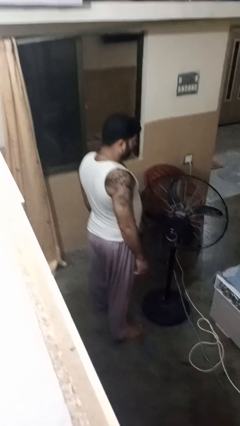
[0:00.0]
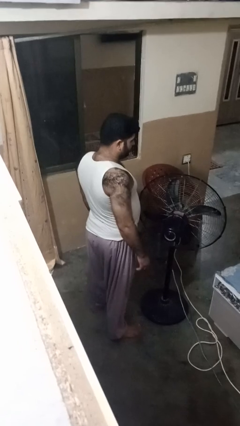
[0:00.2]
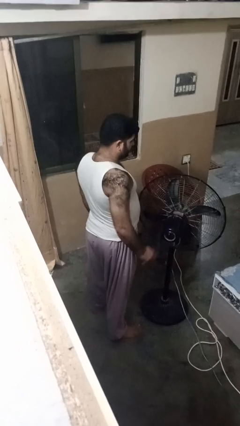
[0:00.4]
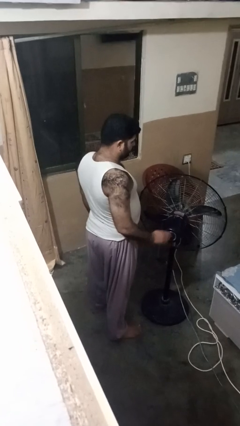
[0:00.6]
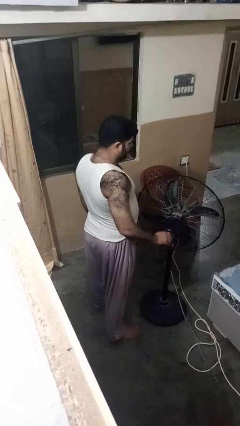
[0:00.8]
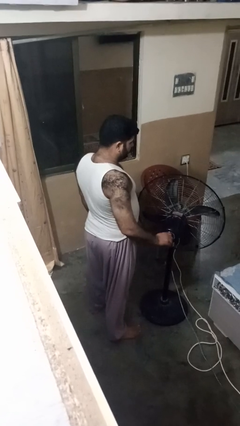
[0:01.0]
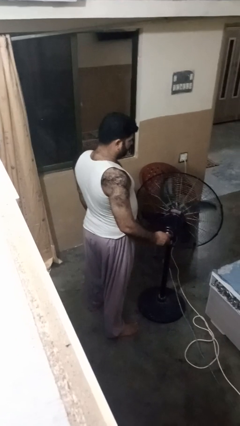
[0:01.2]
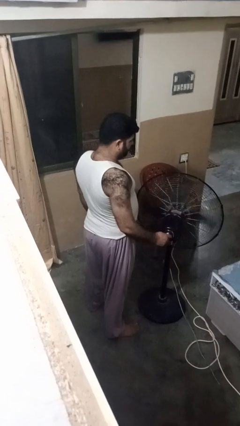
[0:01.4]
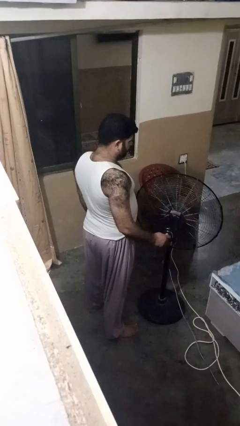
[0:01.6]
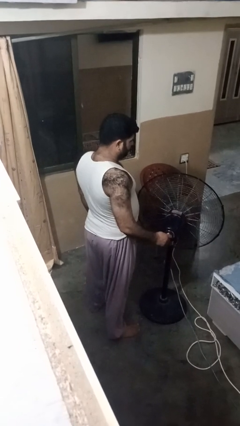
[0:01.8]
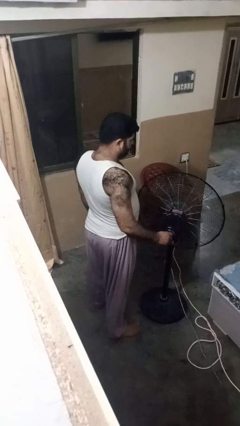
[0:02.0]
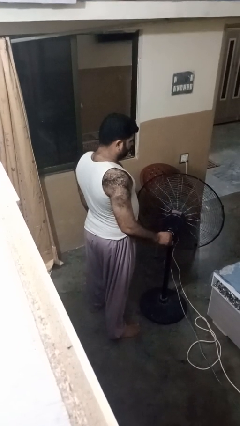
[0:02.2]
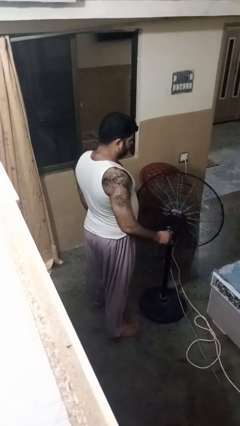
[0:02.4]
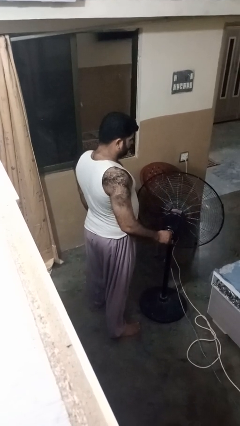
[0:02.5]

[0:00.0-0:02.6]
person turns on fan

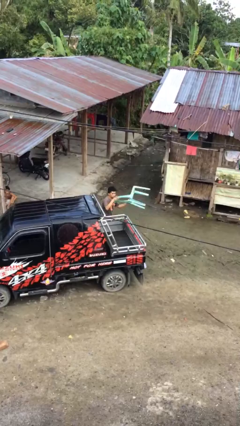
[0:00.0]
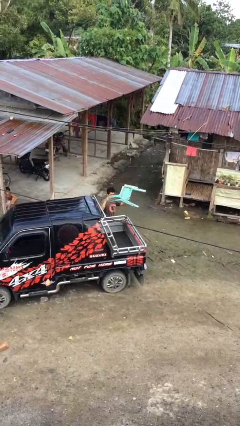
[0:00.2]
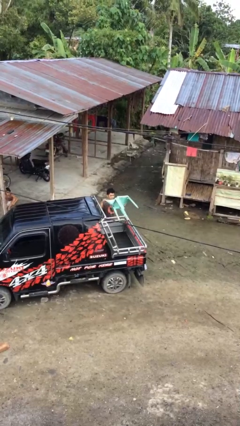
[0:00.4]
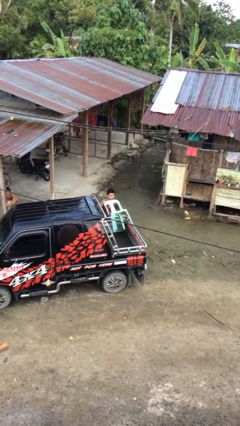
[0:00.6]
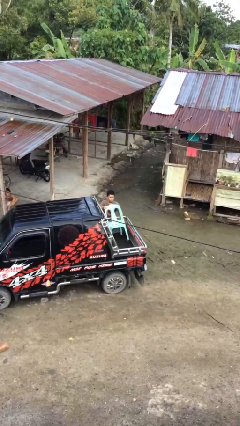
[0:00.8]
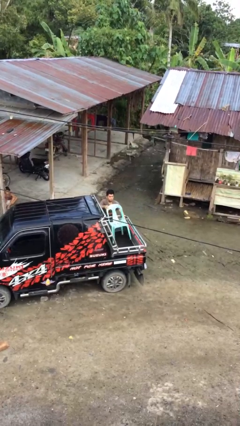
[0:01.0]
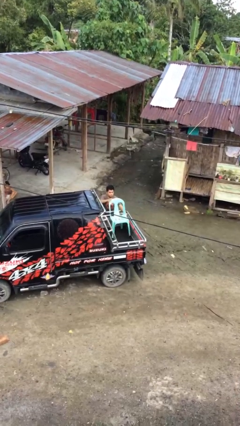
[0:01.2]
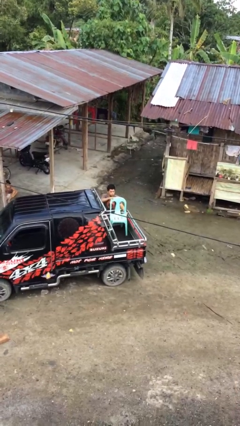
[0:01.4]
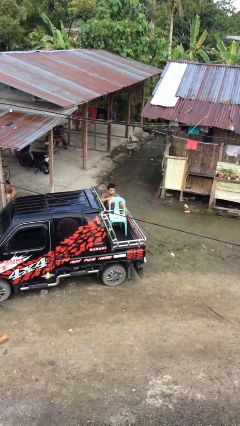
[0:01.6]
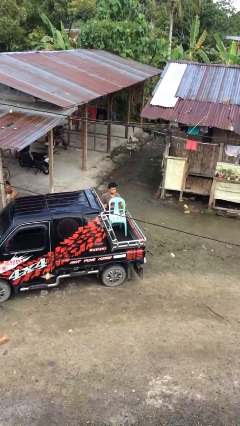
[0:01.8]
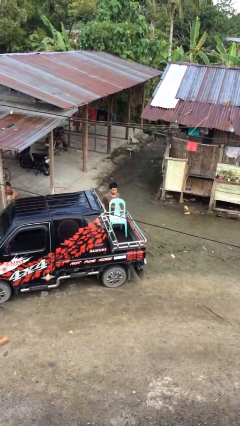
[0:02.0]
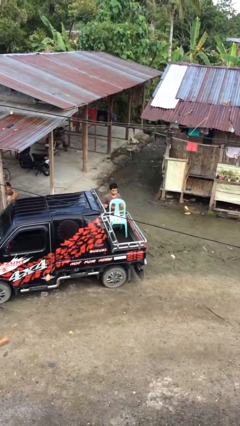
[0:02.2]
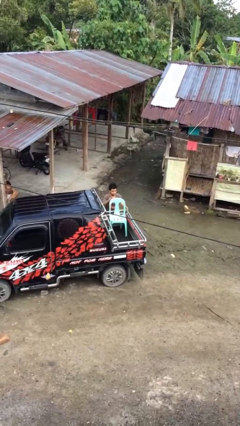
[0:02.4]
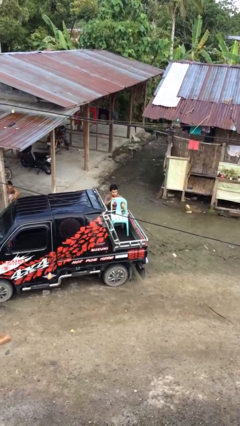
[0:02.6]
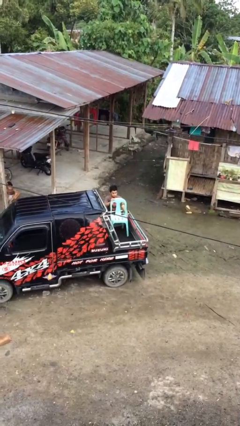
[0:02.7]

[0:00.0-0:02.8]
person loads car

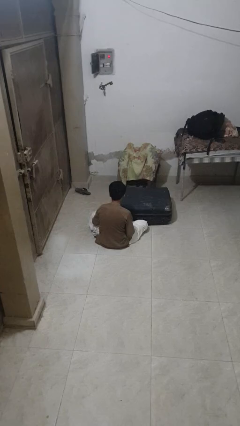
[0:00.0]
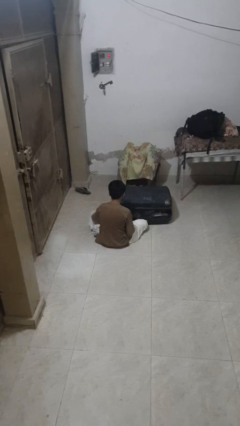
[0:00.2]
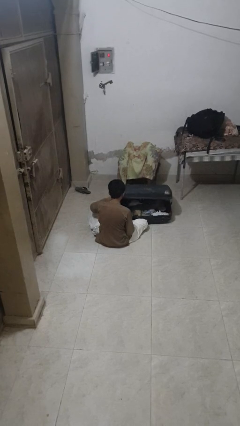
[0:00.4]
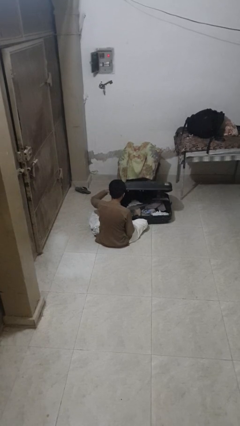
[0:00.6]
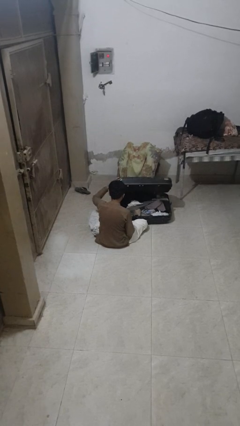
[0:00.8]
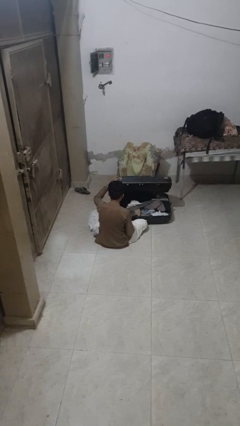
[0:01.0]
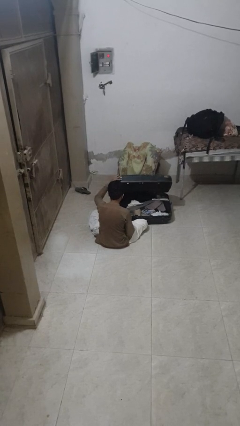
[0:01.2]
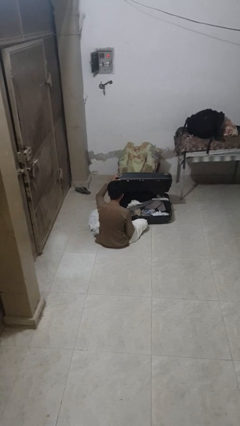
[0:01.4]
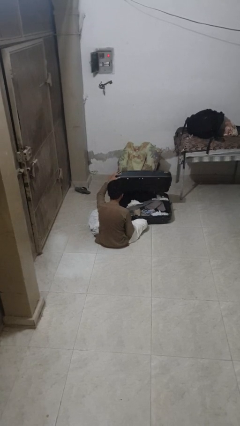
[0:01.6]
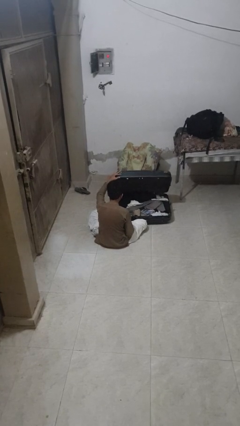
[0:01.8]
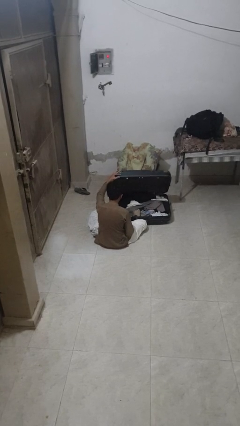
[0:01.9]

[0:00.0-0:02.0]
person opens suitcase

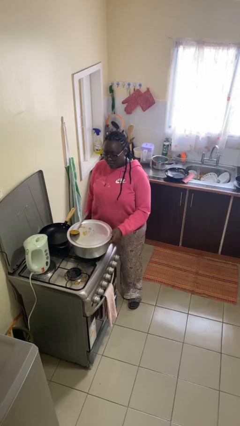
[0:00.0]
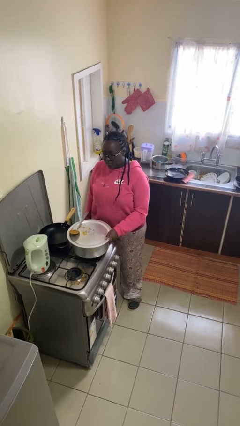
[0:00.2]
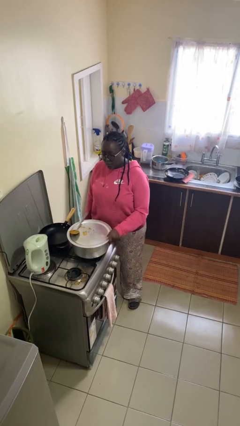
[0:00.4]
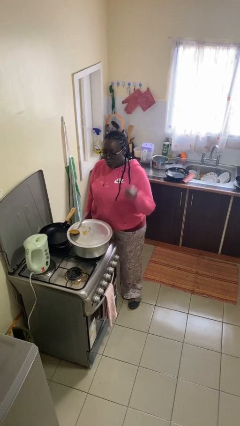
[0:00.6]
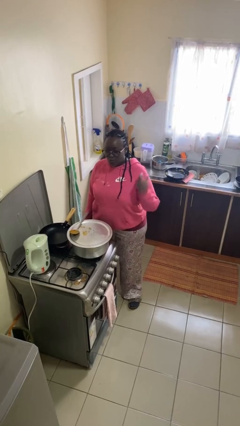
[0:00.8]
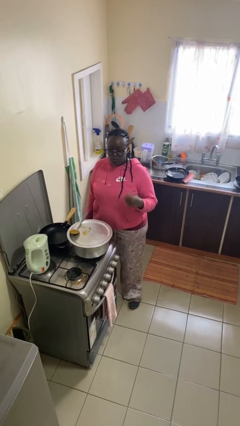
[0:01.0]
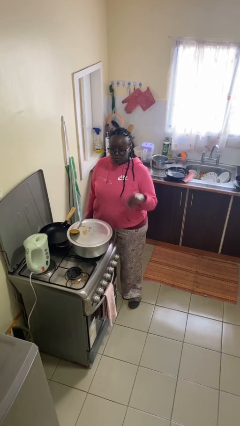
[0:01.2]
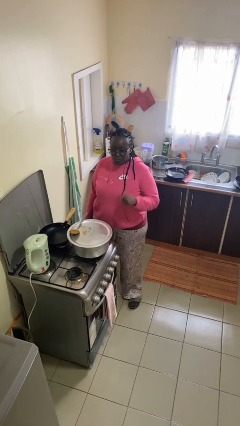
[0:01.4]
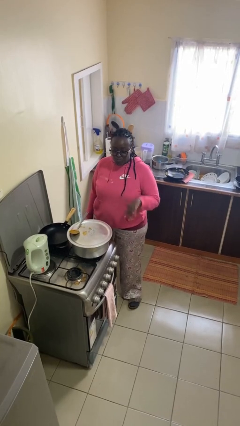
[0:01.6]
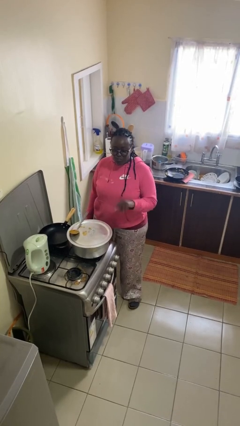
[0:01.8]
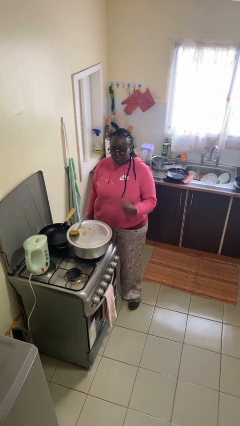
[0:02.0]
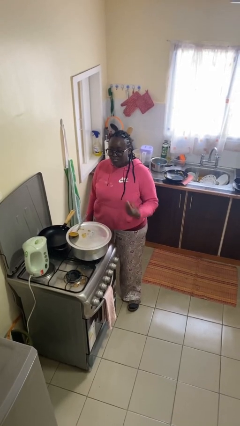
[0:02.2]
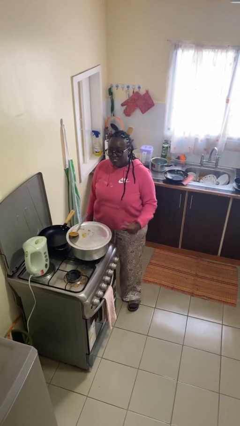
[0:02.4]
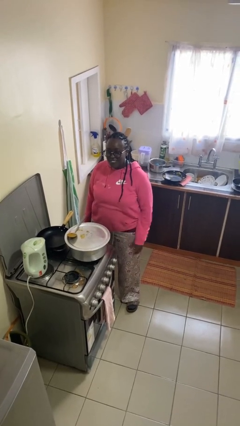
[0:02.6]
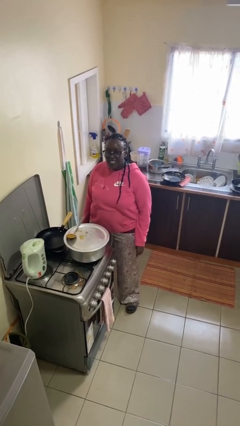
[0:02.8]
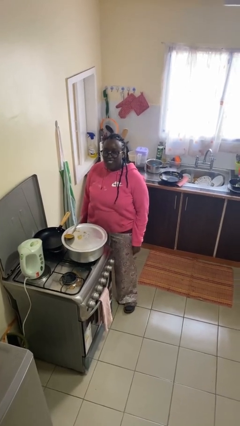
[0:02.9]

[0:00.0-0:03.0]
person burns hand

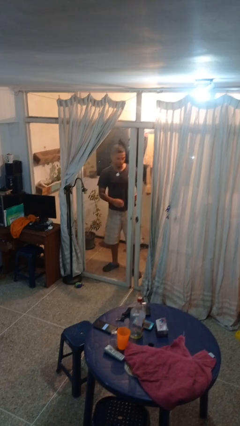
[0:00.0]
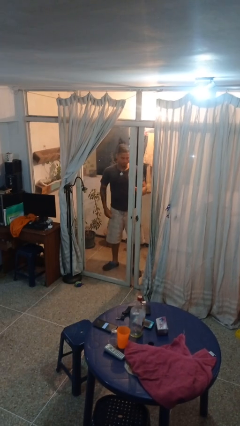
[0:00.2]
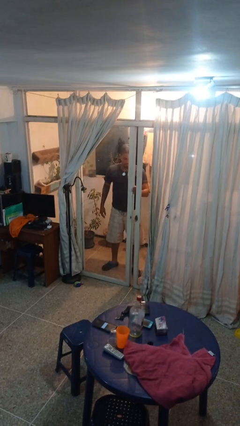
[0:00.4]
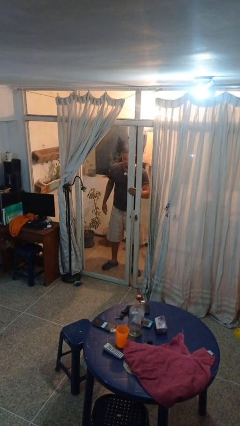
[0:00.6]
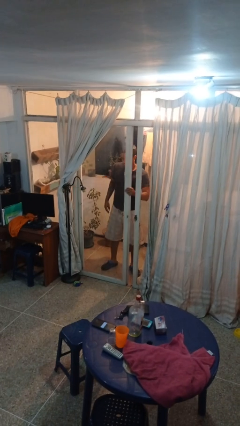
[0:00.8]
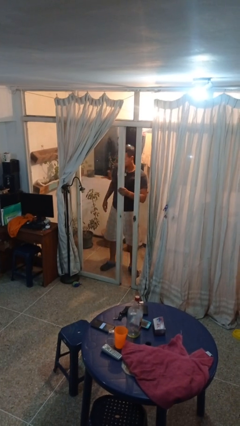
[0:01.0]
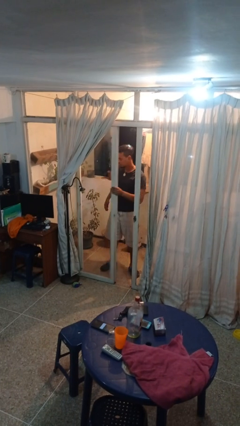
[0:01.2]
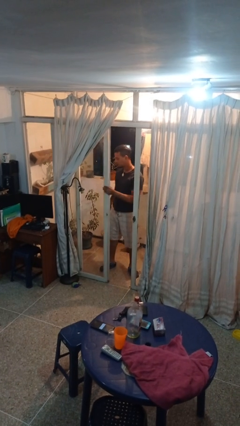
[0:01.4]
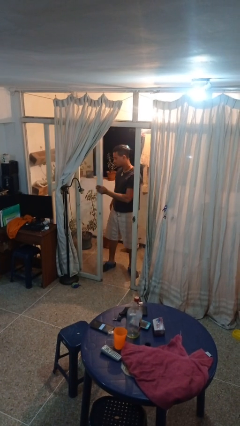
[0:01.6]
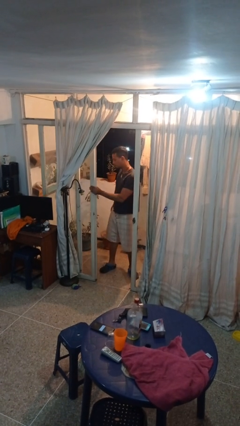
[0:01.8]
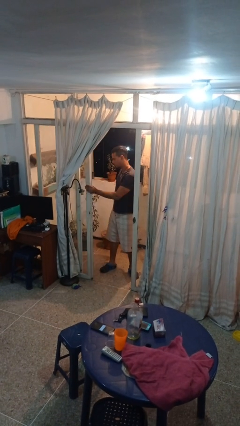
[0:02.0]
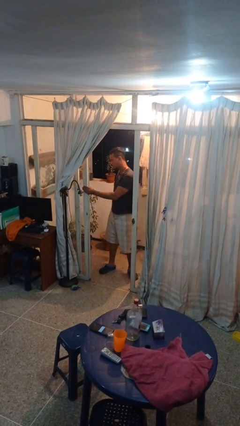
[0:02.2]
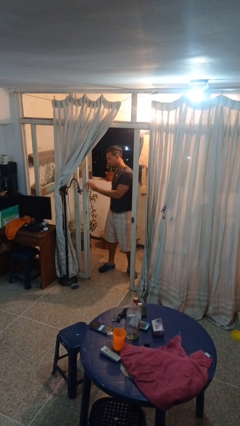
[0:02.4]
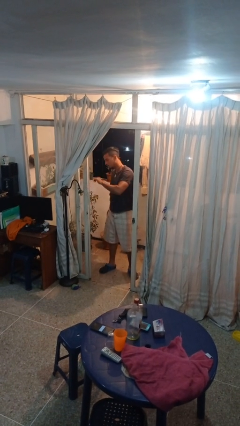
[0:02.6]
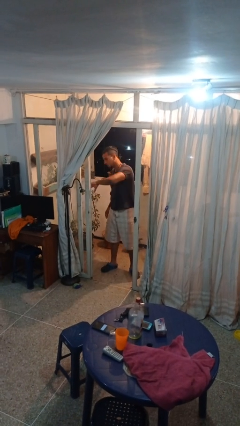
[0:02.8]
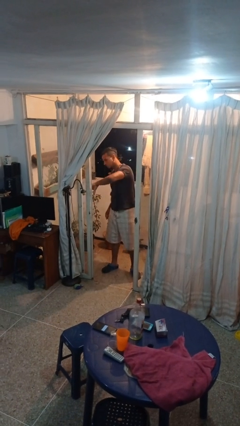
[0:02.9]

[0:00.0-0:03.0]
person opens sliding door

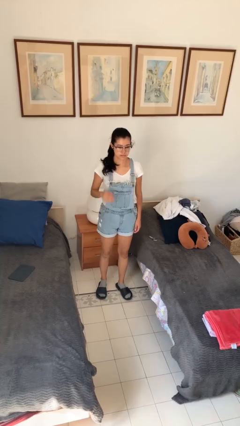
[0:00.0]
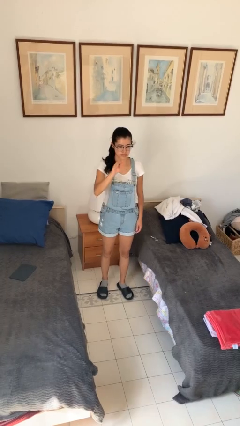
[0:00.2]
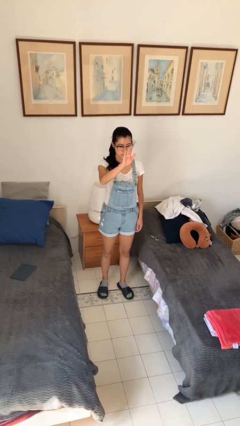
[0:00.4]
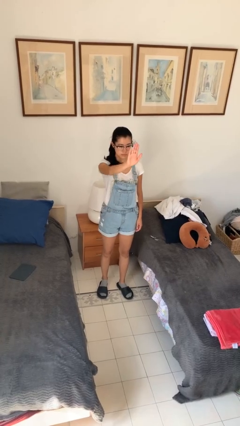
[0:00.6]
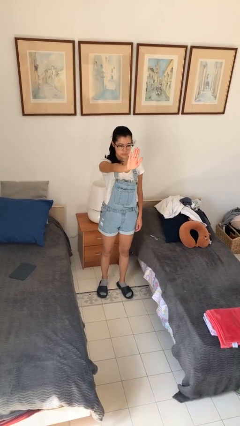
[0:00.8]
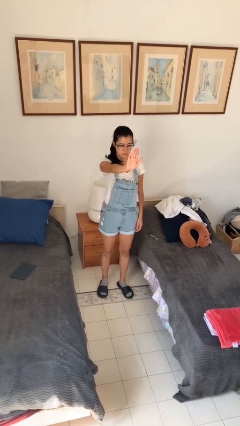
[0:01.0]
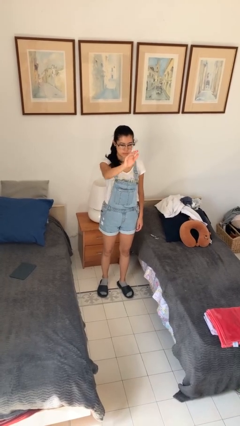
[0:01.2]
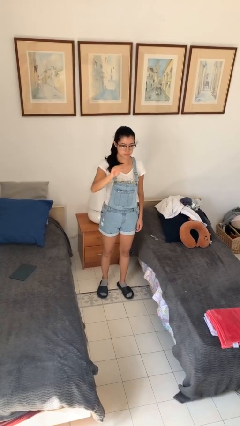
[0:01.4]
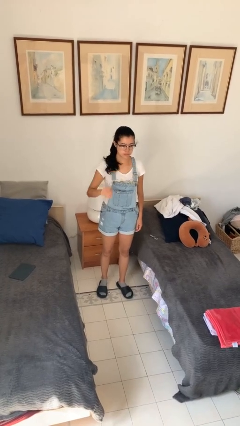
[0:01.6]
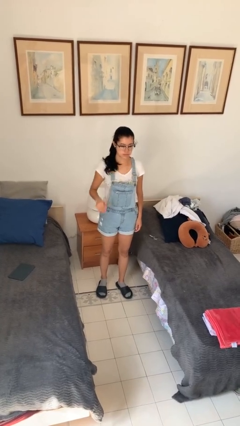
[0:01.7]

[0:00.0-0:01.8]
person gestures stop

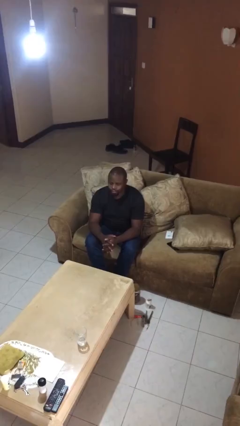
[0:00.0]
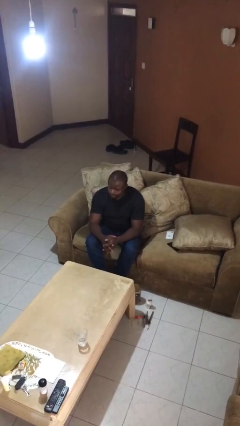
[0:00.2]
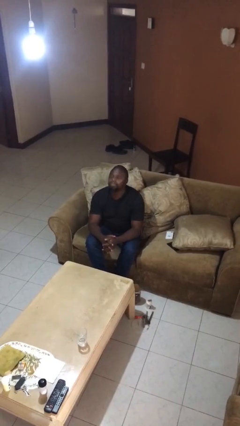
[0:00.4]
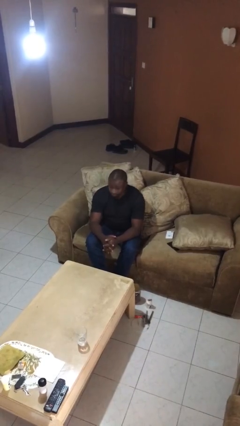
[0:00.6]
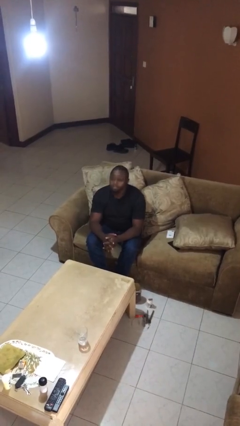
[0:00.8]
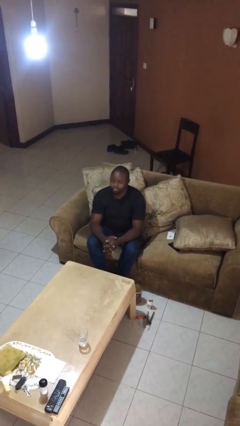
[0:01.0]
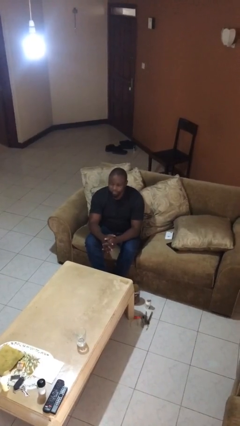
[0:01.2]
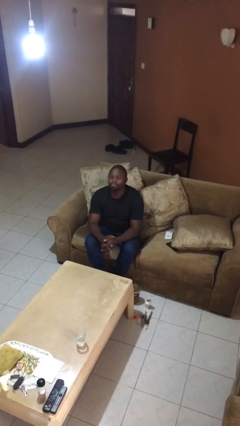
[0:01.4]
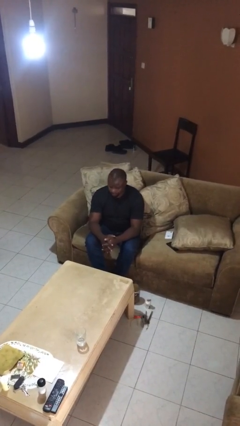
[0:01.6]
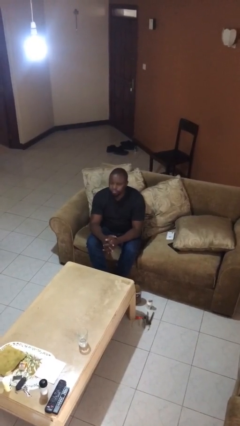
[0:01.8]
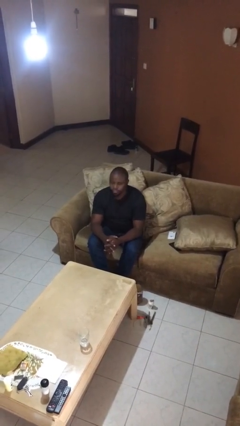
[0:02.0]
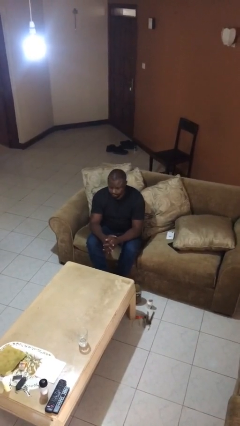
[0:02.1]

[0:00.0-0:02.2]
person nods head
